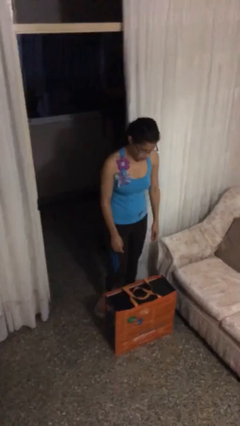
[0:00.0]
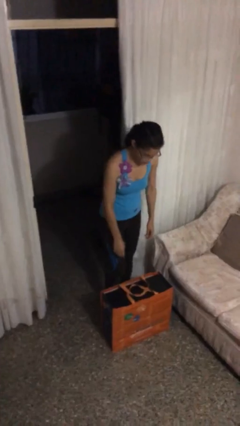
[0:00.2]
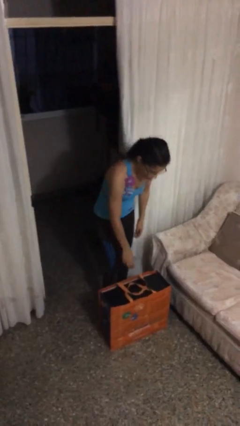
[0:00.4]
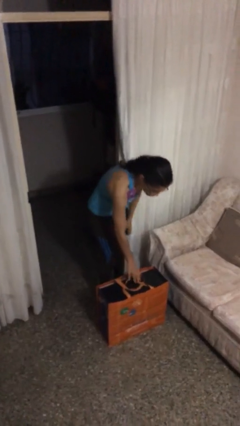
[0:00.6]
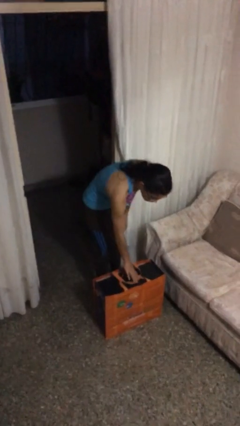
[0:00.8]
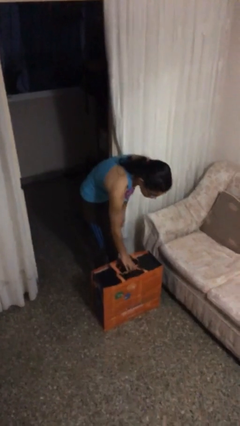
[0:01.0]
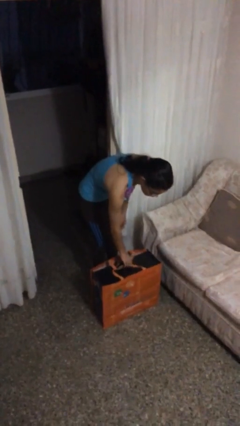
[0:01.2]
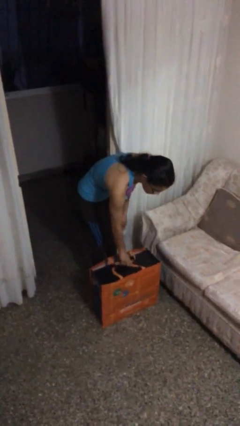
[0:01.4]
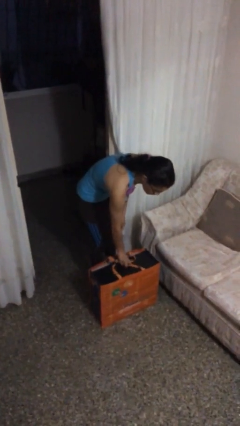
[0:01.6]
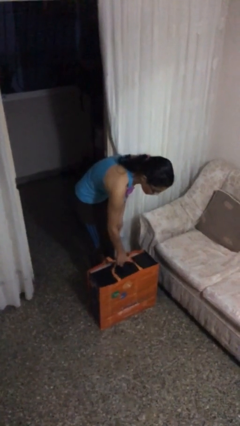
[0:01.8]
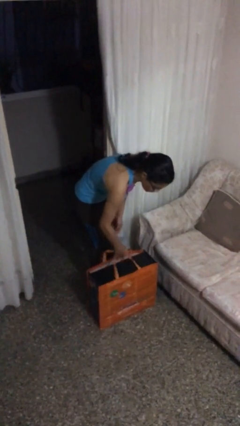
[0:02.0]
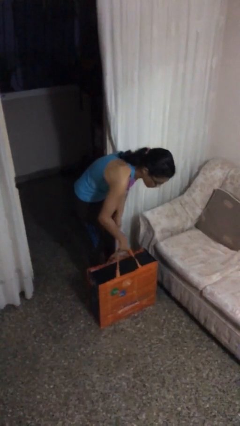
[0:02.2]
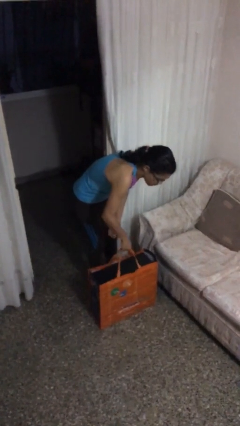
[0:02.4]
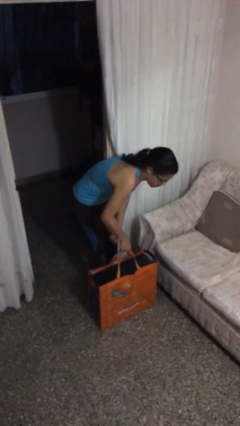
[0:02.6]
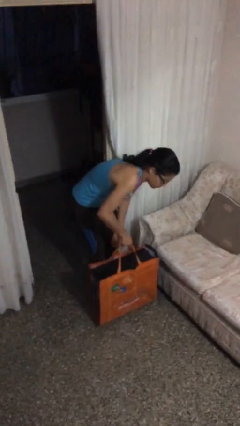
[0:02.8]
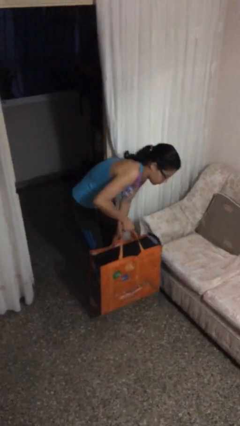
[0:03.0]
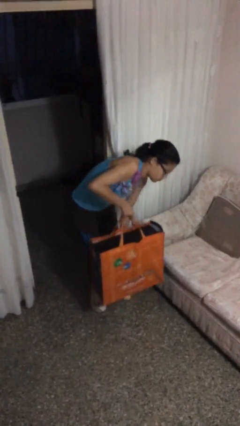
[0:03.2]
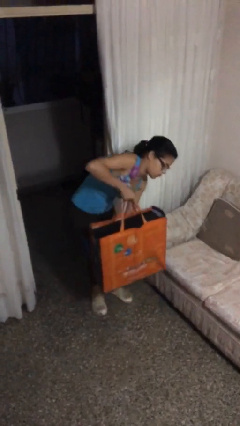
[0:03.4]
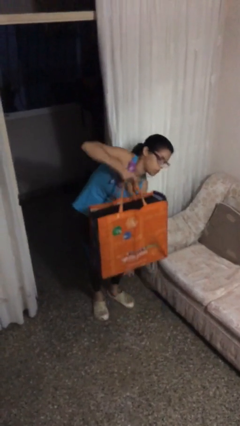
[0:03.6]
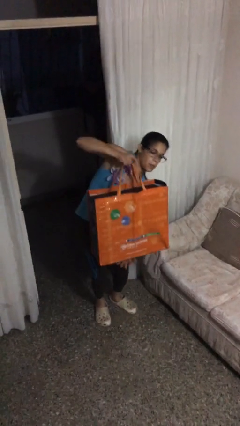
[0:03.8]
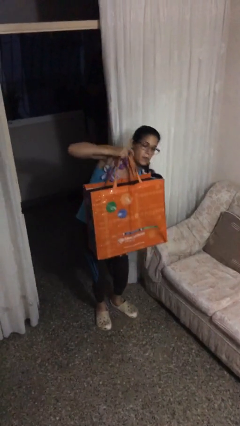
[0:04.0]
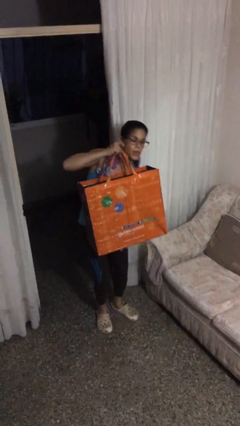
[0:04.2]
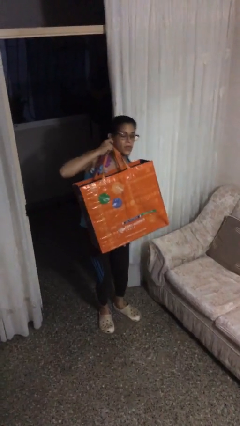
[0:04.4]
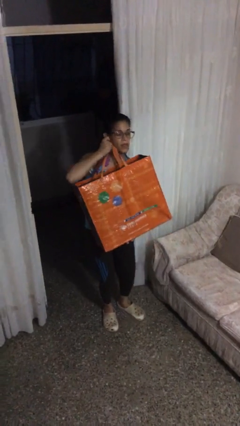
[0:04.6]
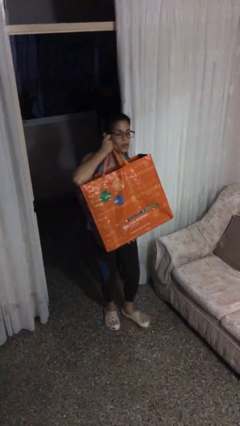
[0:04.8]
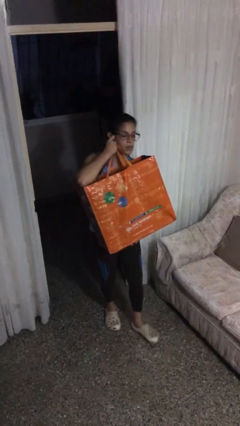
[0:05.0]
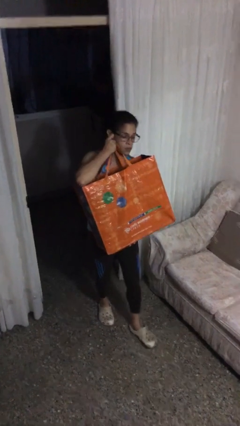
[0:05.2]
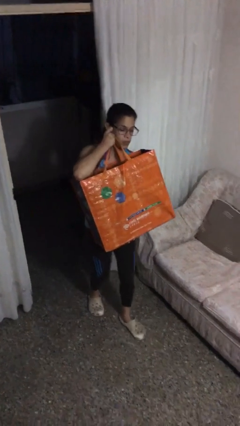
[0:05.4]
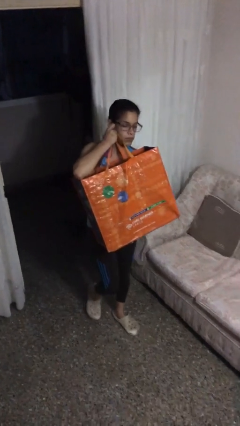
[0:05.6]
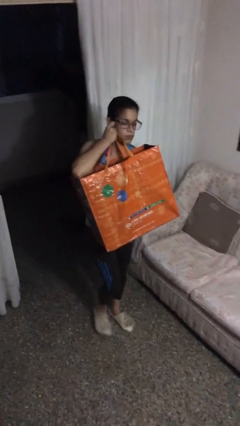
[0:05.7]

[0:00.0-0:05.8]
person picks up object from floor

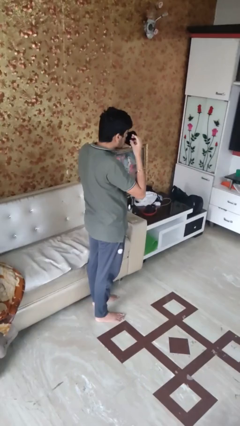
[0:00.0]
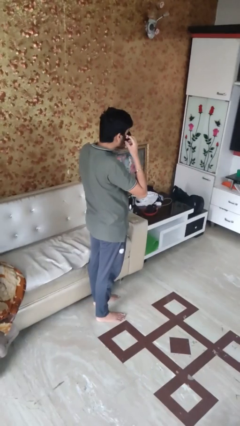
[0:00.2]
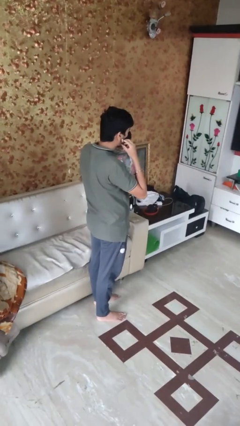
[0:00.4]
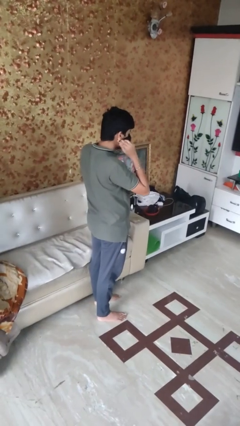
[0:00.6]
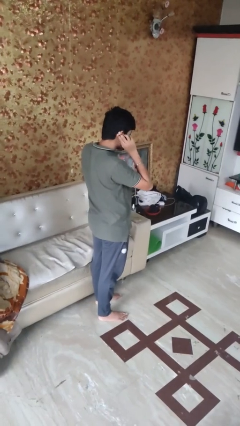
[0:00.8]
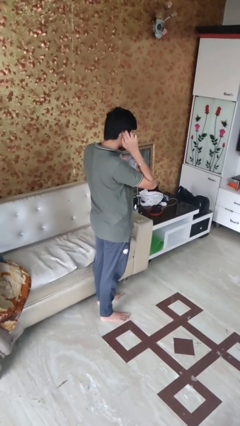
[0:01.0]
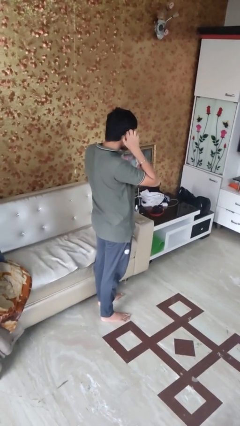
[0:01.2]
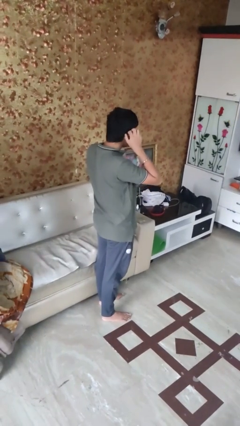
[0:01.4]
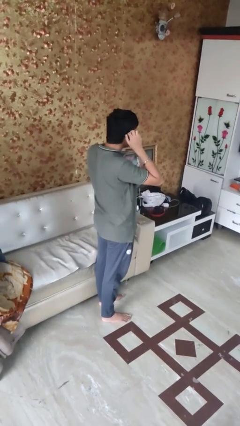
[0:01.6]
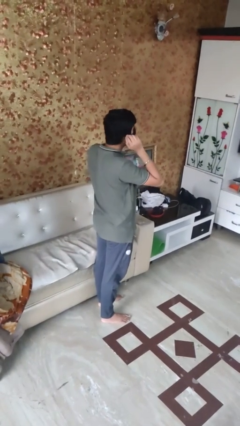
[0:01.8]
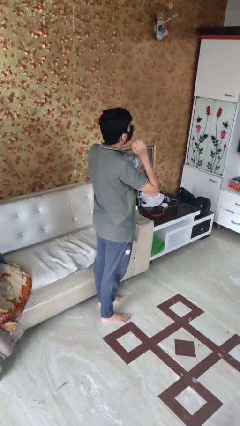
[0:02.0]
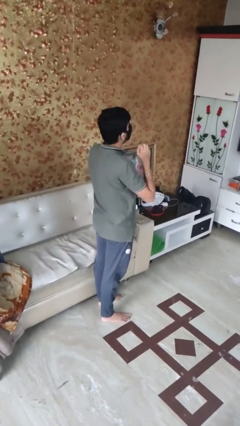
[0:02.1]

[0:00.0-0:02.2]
person puts on facemask

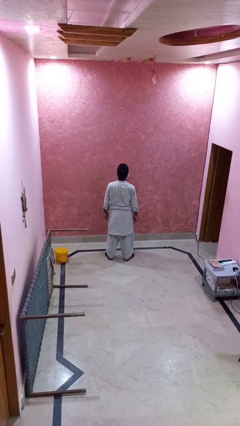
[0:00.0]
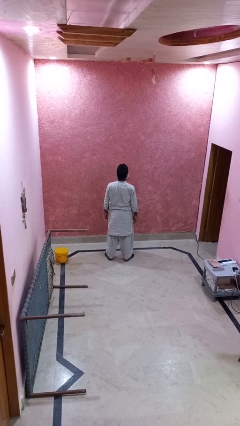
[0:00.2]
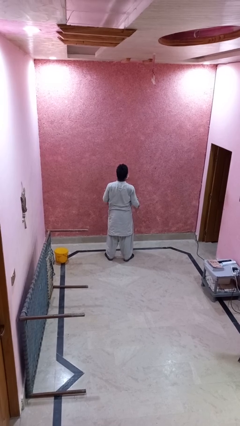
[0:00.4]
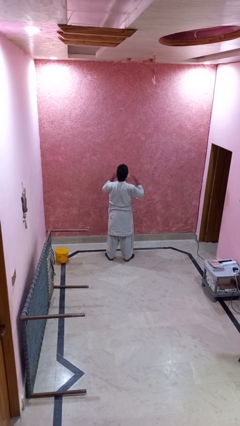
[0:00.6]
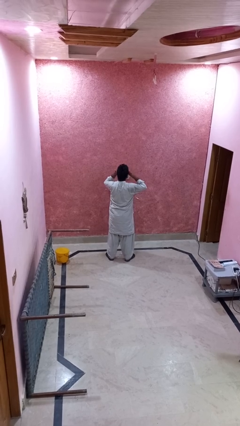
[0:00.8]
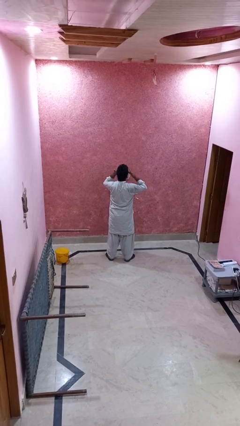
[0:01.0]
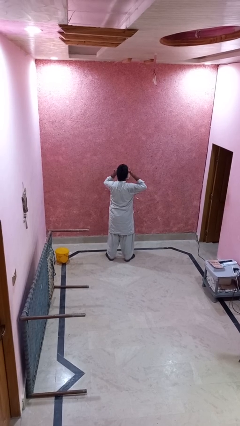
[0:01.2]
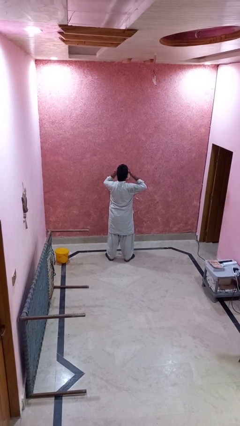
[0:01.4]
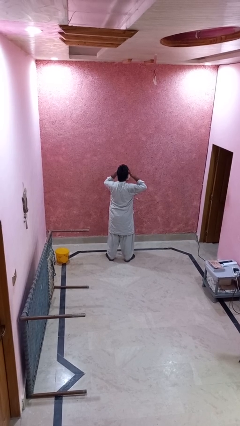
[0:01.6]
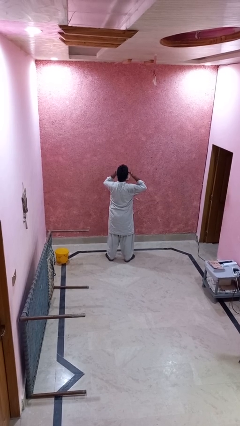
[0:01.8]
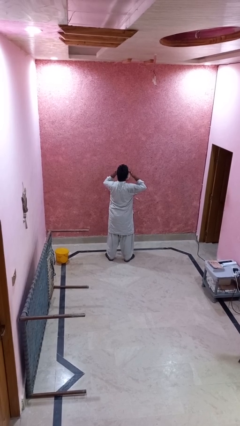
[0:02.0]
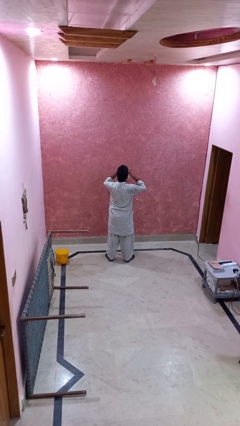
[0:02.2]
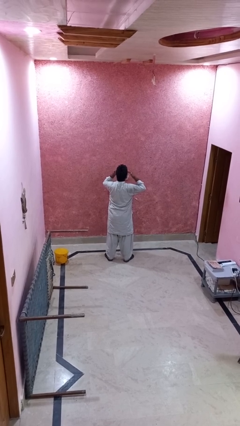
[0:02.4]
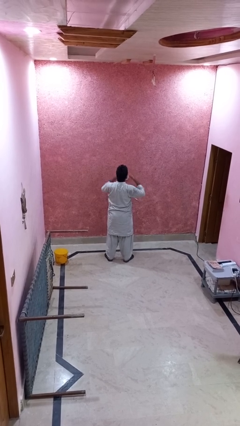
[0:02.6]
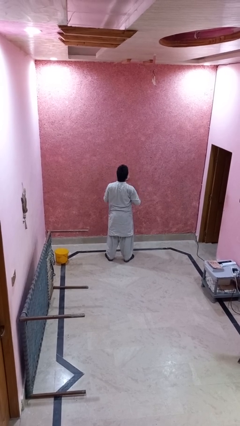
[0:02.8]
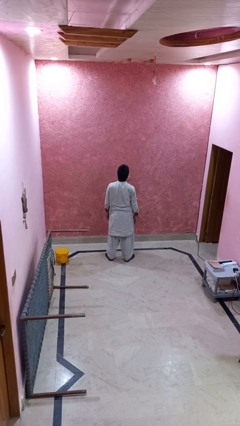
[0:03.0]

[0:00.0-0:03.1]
person rubs eyes

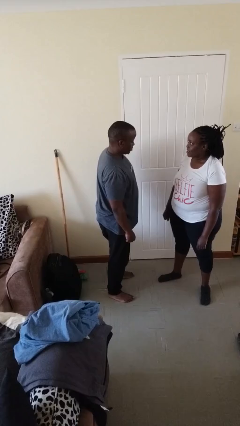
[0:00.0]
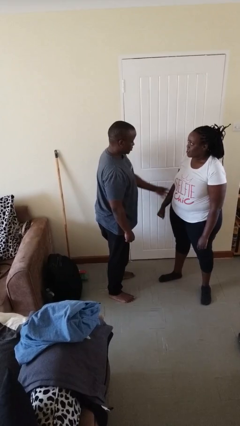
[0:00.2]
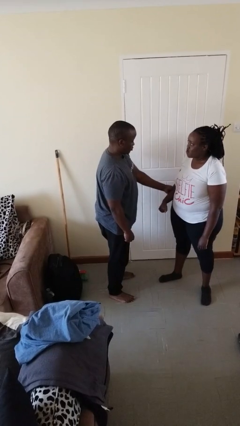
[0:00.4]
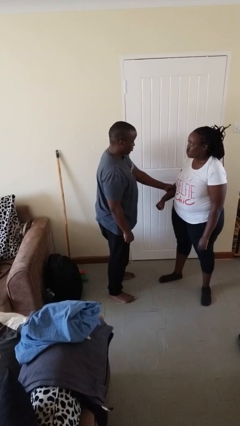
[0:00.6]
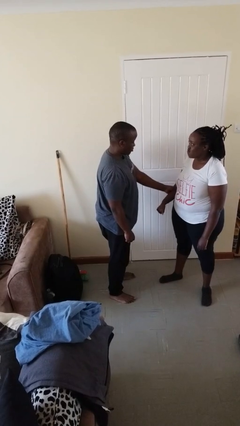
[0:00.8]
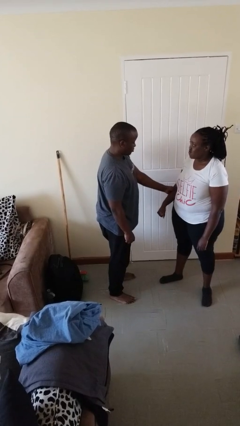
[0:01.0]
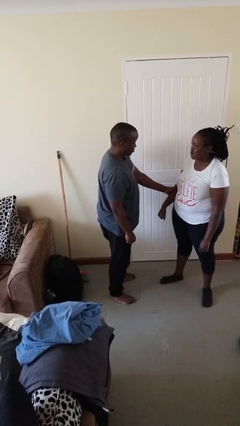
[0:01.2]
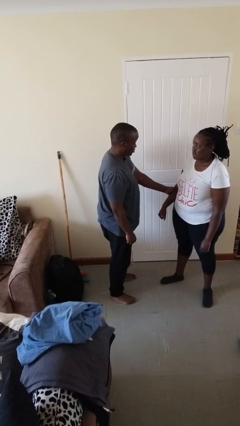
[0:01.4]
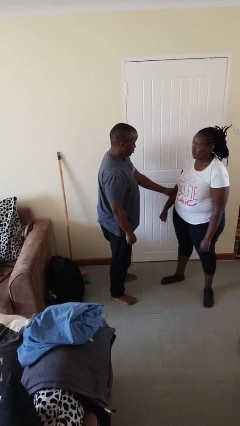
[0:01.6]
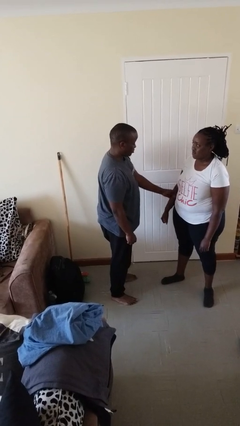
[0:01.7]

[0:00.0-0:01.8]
person grabs person by forearm

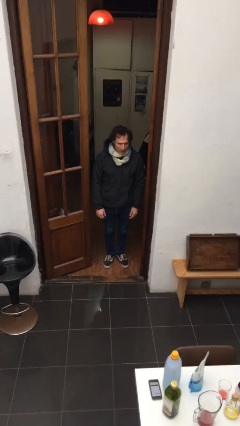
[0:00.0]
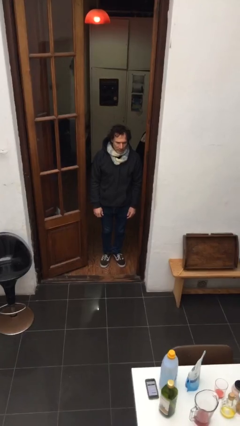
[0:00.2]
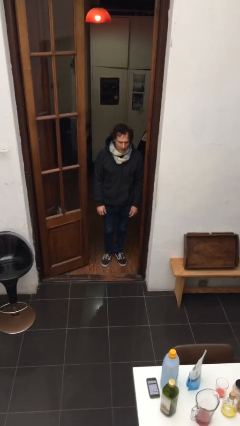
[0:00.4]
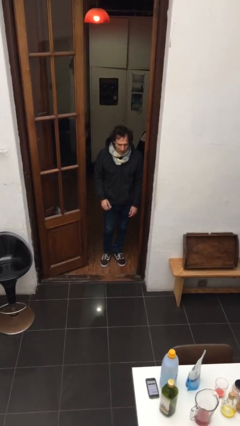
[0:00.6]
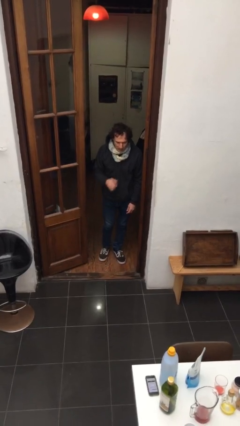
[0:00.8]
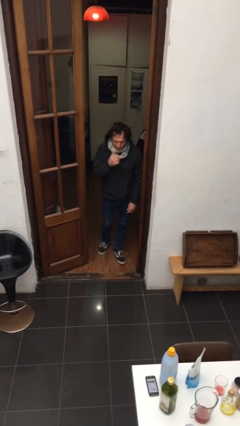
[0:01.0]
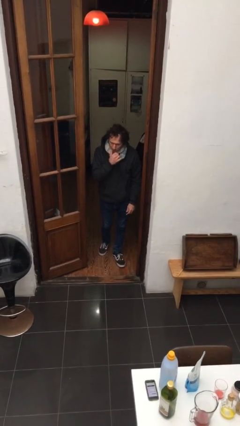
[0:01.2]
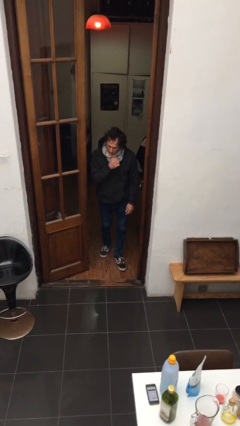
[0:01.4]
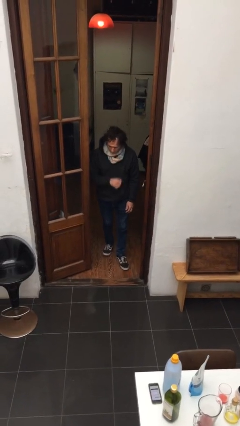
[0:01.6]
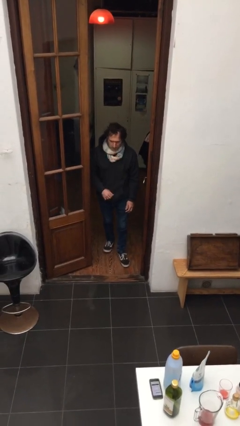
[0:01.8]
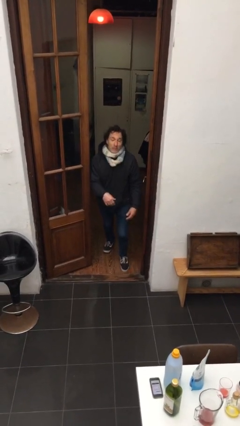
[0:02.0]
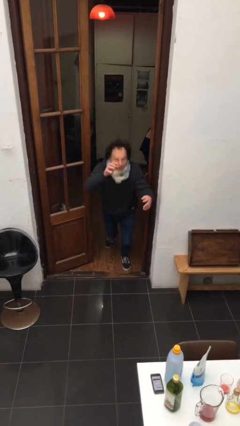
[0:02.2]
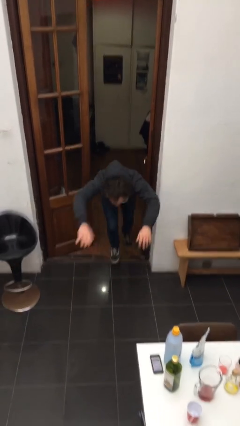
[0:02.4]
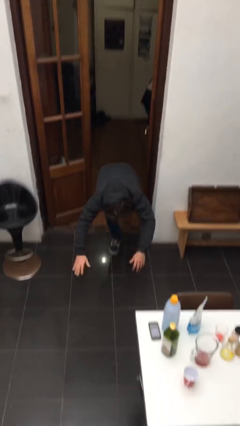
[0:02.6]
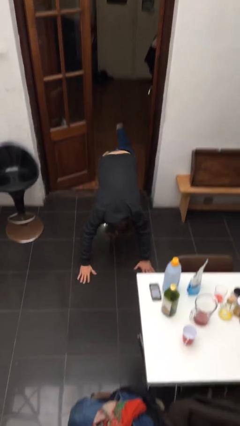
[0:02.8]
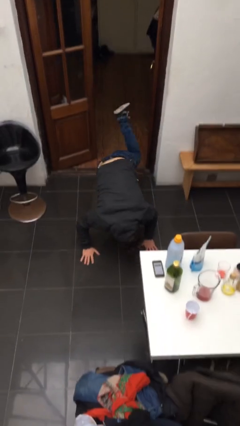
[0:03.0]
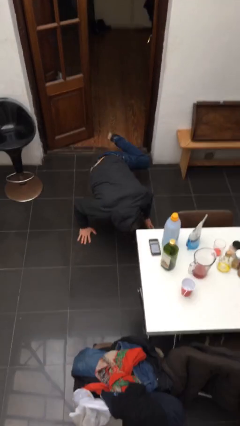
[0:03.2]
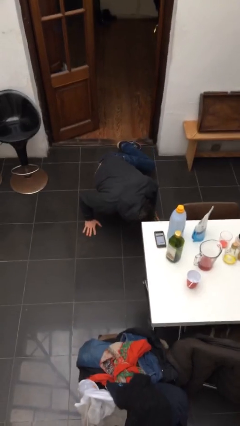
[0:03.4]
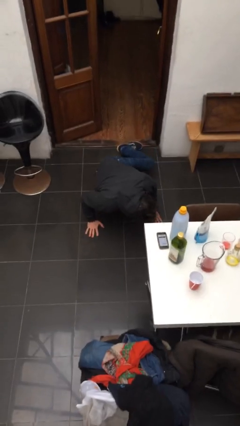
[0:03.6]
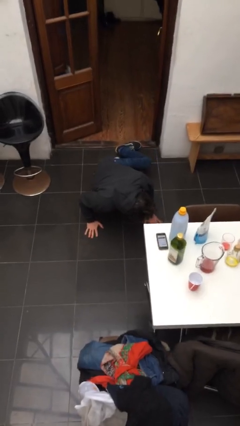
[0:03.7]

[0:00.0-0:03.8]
person trips on object on floor

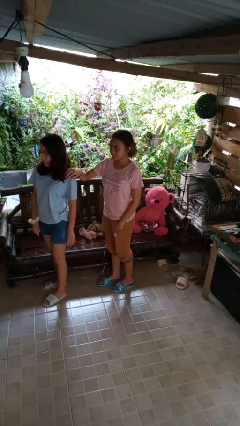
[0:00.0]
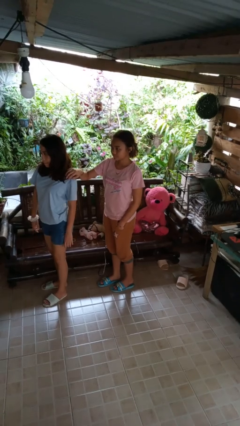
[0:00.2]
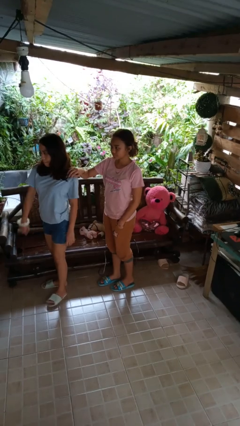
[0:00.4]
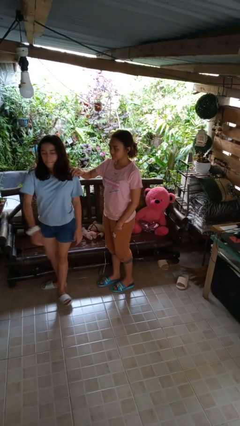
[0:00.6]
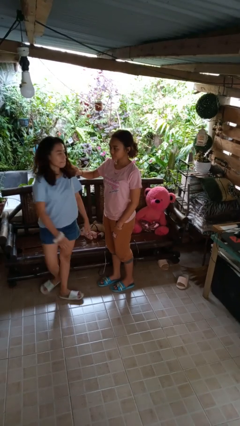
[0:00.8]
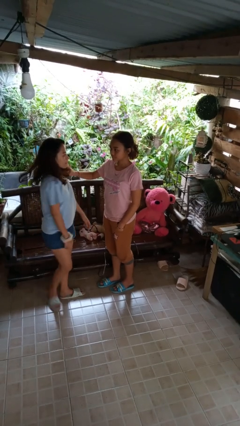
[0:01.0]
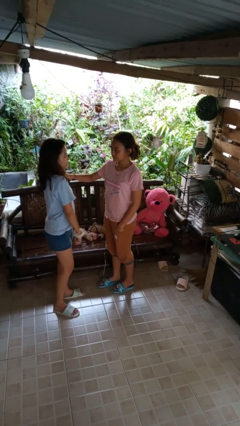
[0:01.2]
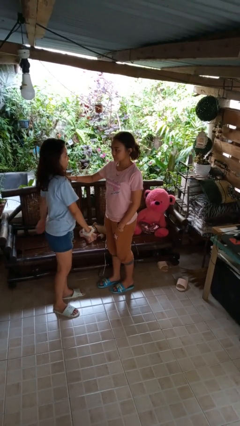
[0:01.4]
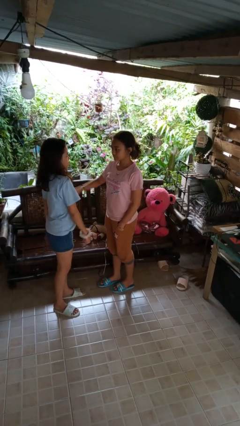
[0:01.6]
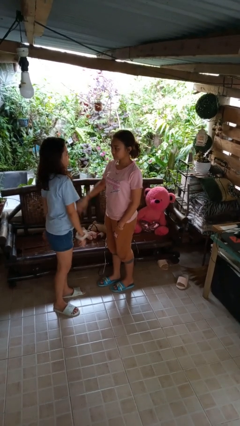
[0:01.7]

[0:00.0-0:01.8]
person spins person around
